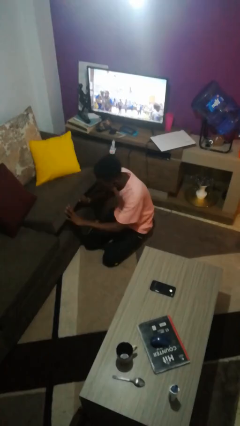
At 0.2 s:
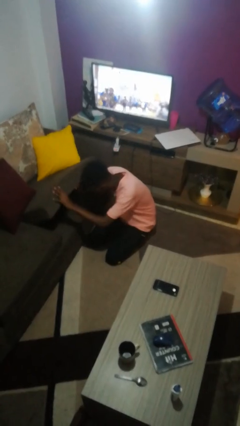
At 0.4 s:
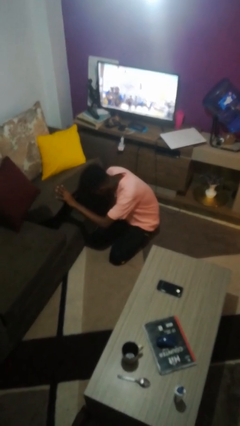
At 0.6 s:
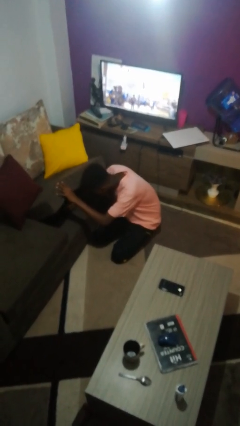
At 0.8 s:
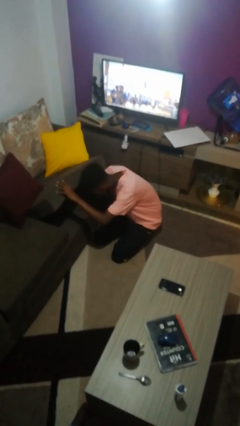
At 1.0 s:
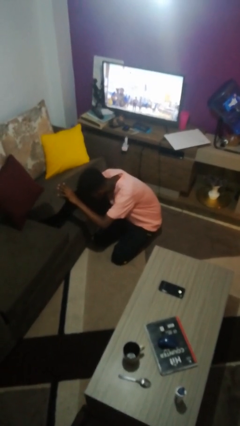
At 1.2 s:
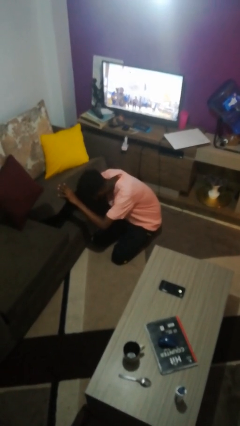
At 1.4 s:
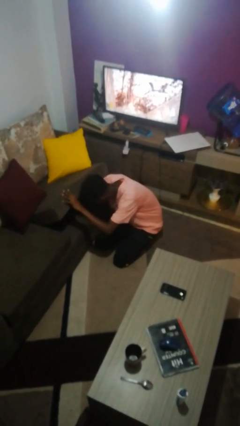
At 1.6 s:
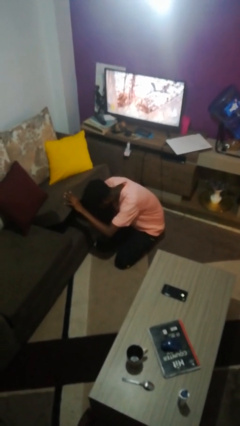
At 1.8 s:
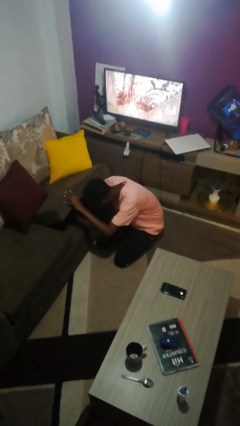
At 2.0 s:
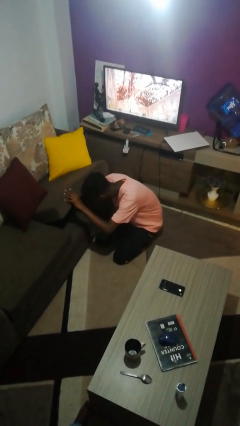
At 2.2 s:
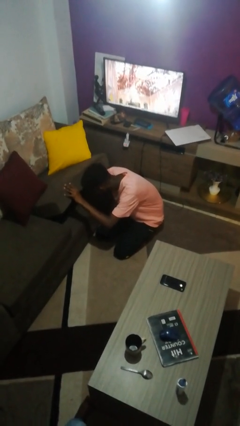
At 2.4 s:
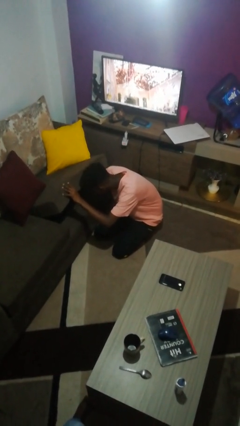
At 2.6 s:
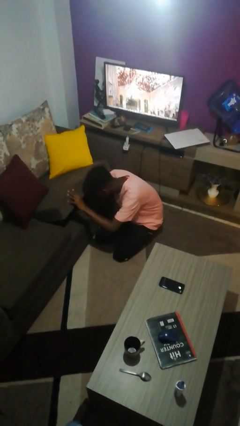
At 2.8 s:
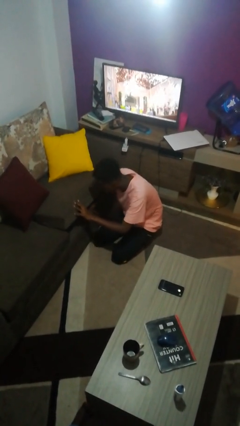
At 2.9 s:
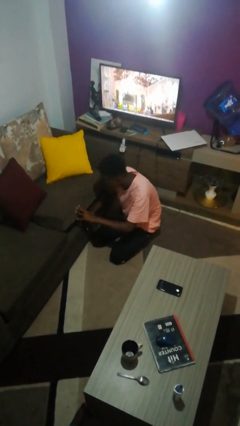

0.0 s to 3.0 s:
person searches under couch

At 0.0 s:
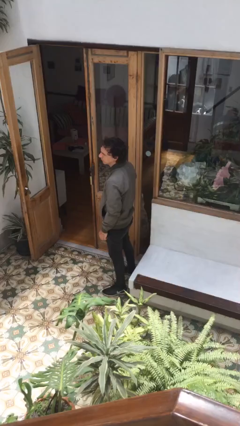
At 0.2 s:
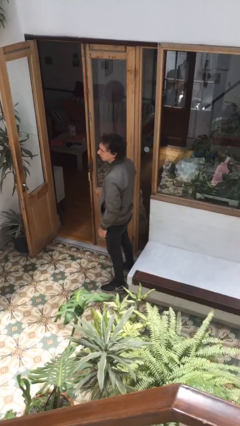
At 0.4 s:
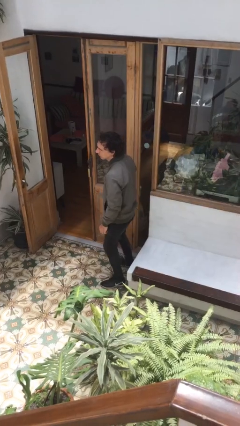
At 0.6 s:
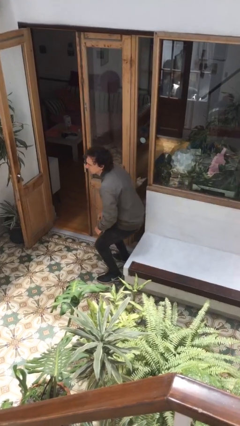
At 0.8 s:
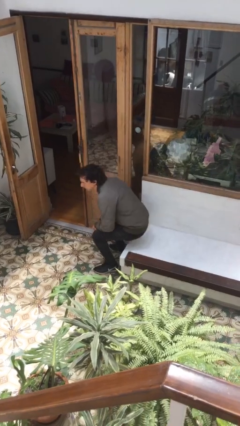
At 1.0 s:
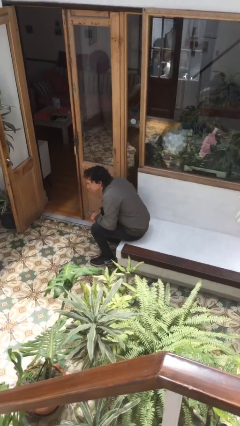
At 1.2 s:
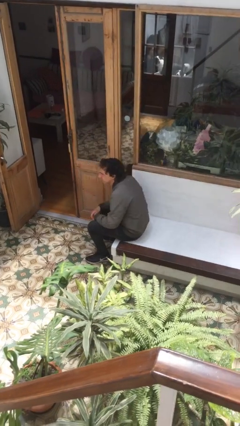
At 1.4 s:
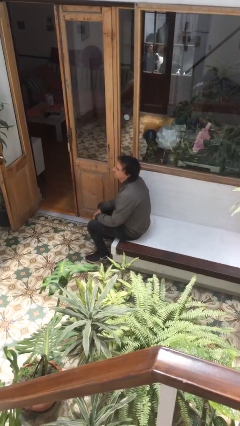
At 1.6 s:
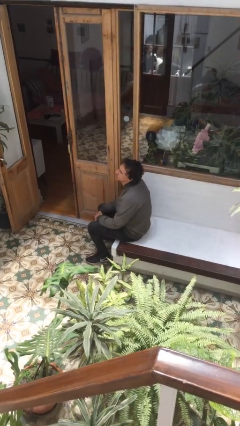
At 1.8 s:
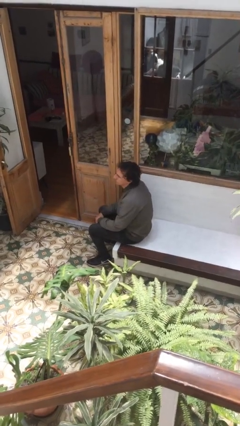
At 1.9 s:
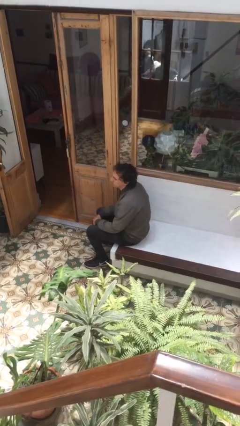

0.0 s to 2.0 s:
person sits down

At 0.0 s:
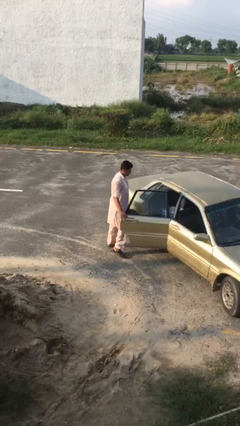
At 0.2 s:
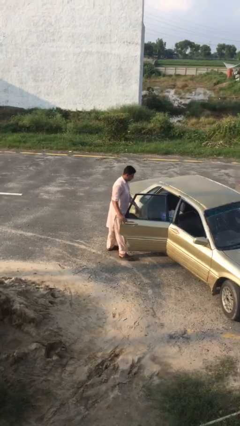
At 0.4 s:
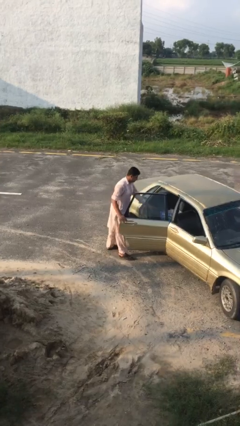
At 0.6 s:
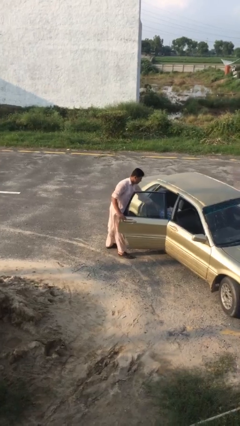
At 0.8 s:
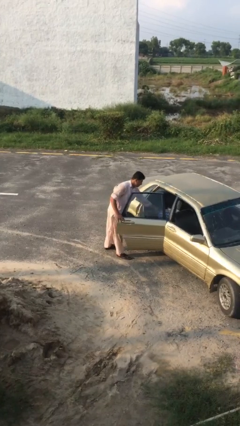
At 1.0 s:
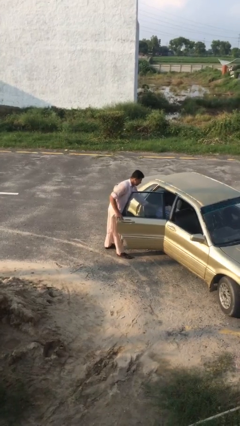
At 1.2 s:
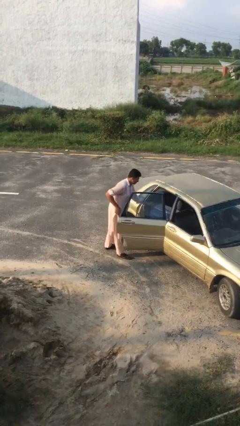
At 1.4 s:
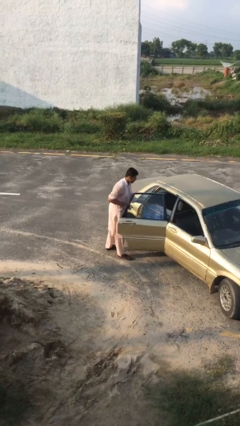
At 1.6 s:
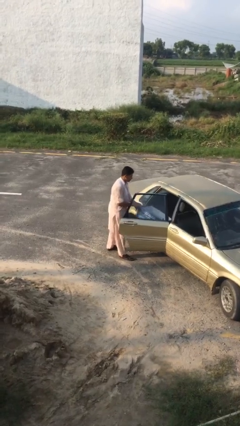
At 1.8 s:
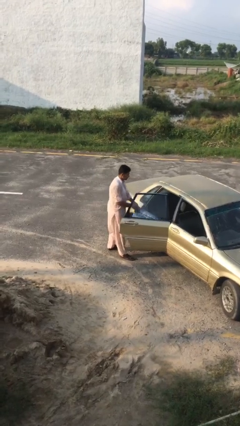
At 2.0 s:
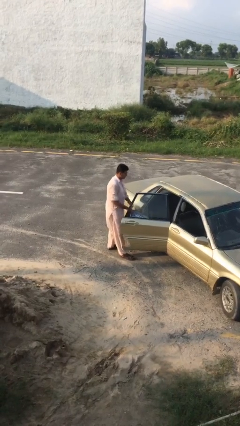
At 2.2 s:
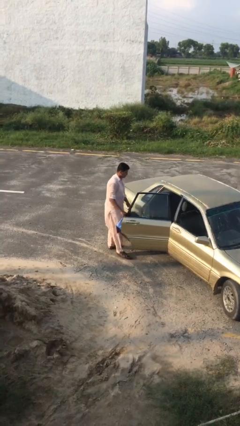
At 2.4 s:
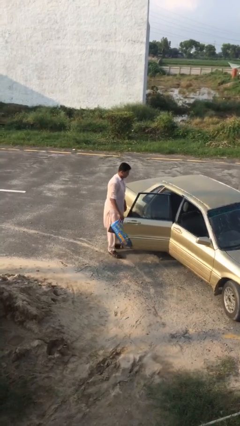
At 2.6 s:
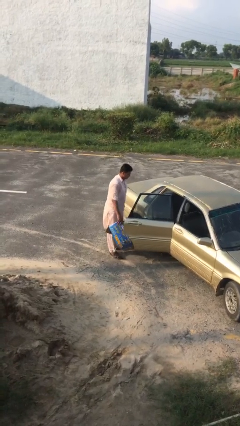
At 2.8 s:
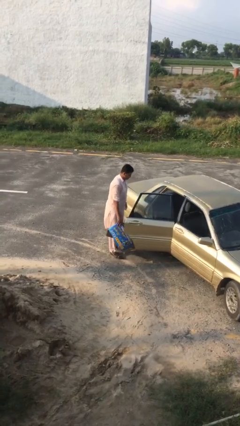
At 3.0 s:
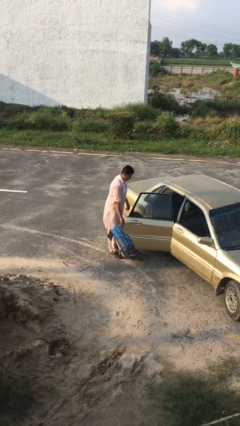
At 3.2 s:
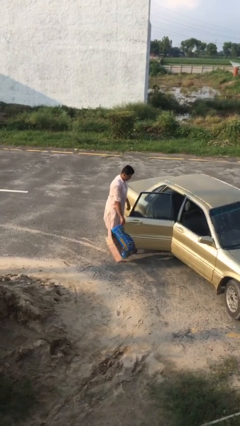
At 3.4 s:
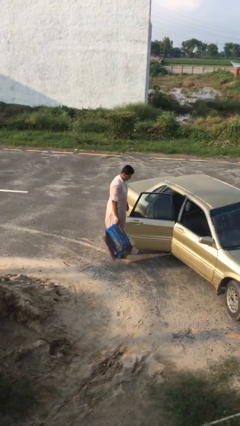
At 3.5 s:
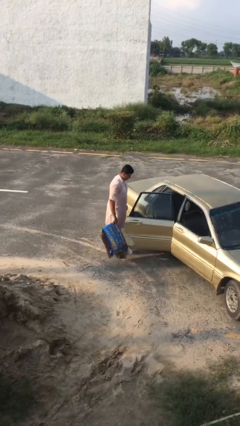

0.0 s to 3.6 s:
person unloads car

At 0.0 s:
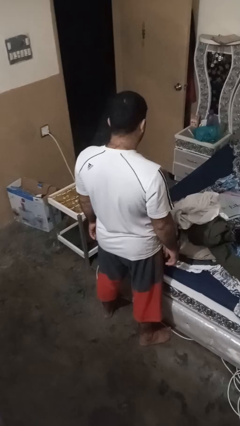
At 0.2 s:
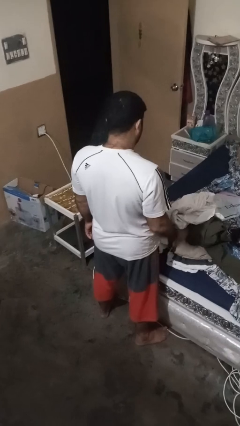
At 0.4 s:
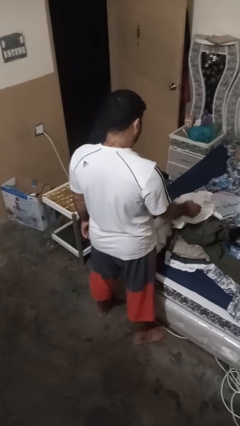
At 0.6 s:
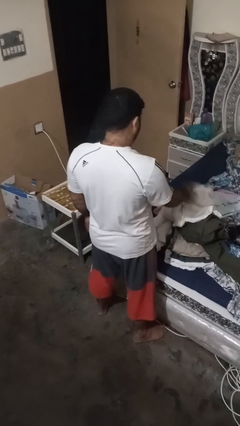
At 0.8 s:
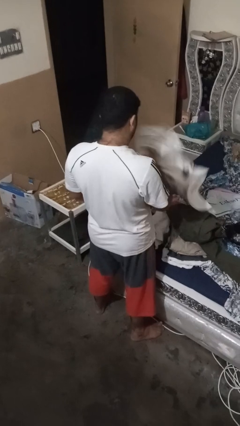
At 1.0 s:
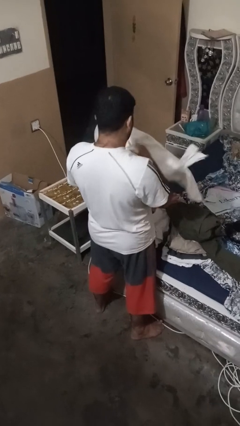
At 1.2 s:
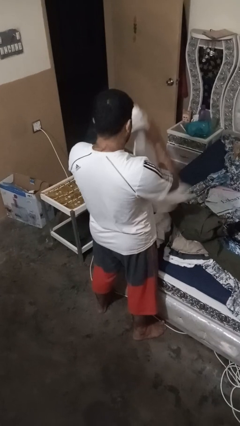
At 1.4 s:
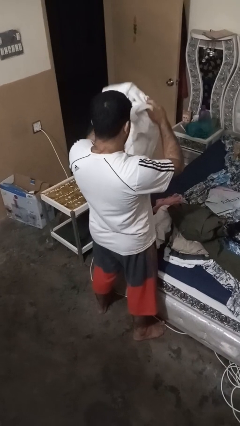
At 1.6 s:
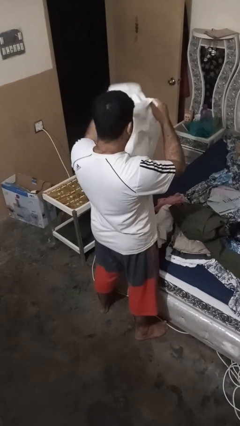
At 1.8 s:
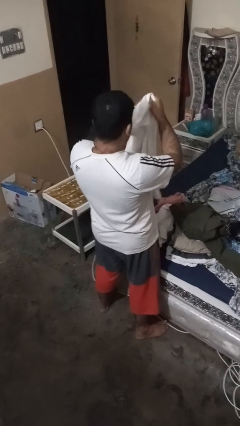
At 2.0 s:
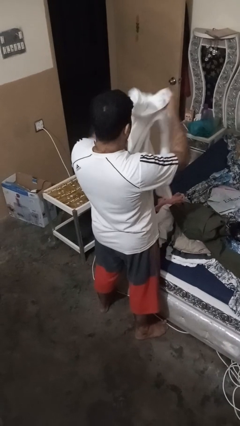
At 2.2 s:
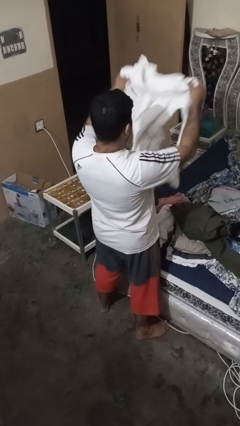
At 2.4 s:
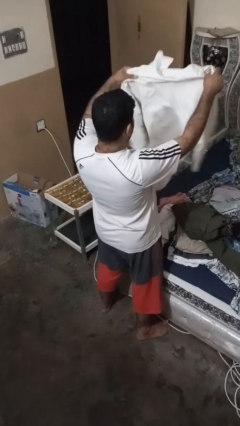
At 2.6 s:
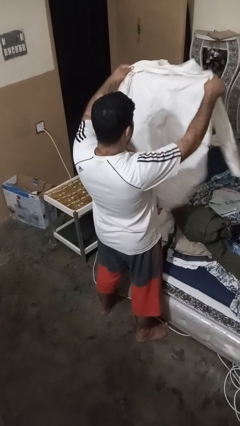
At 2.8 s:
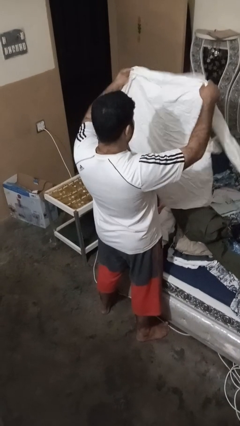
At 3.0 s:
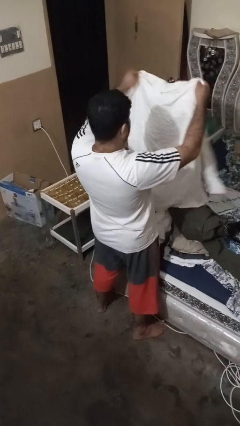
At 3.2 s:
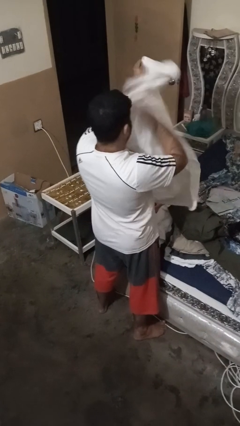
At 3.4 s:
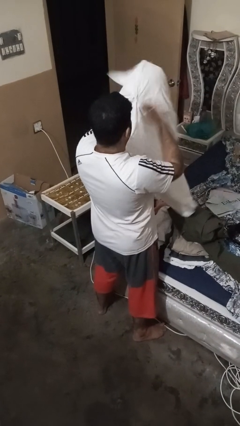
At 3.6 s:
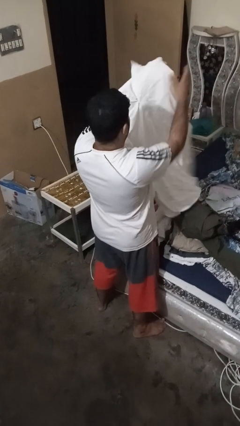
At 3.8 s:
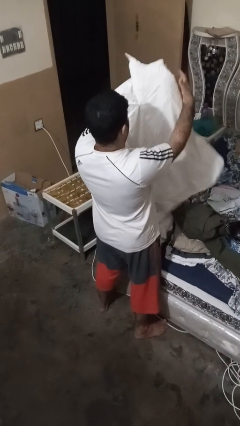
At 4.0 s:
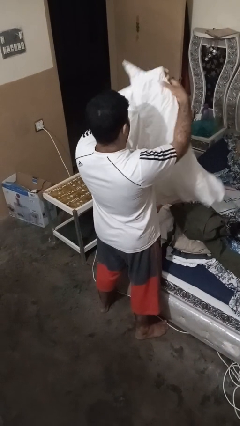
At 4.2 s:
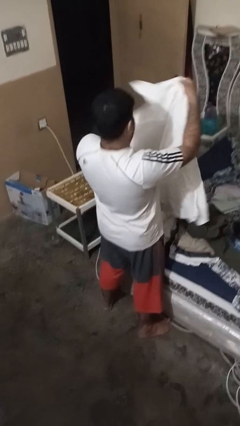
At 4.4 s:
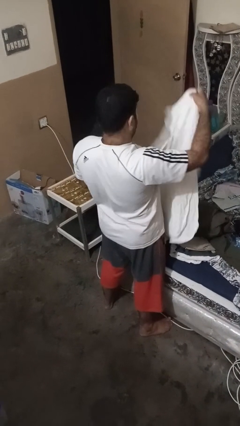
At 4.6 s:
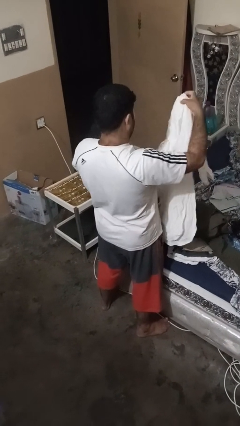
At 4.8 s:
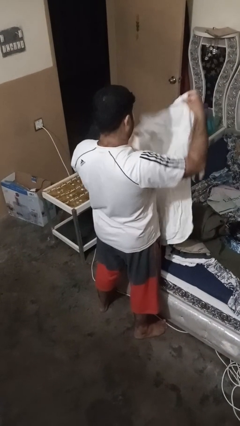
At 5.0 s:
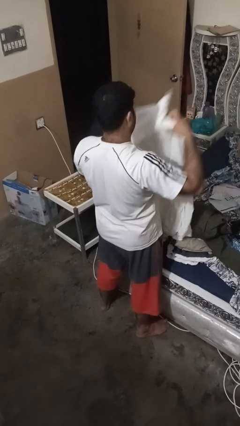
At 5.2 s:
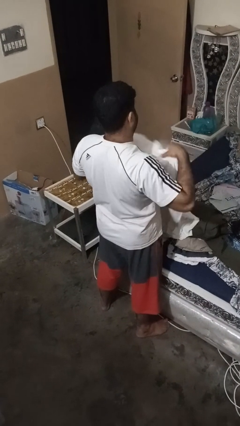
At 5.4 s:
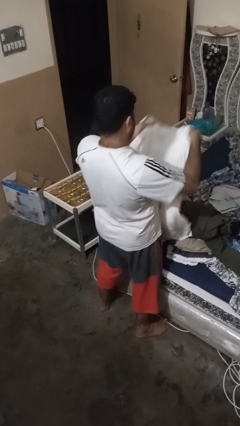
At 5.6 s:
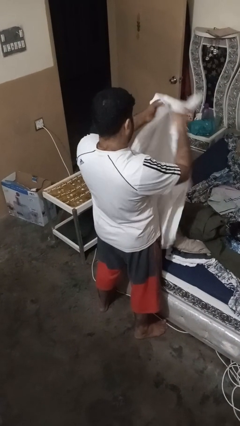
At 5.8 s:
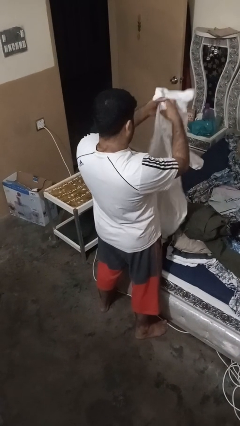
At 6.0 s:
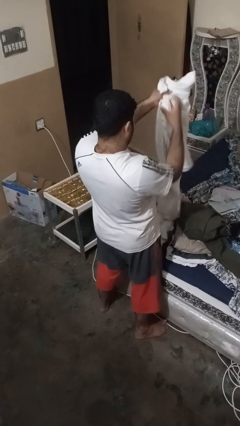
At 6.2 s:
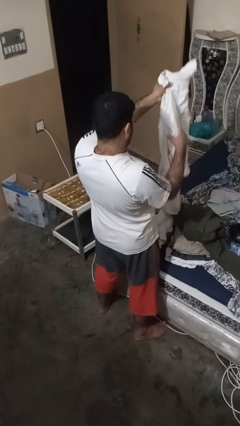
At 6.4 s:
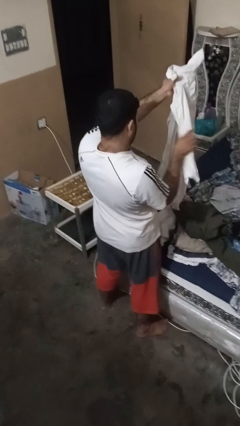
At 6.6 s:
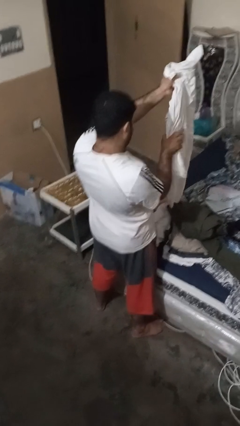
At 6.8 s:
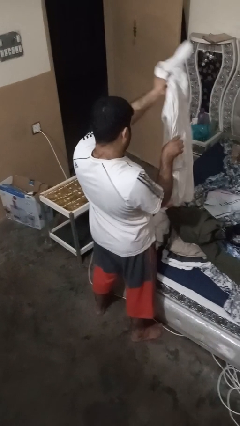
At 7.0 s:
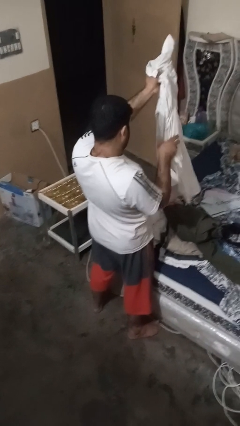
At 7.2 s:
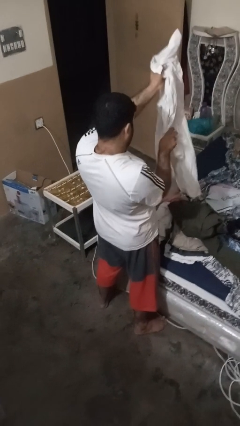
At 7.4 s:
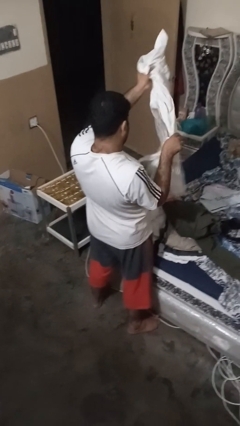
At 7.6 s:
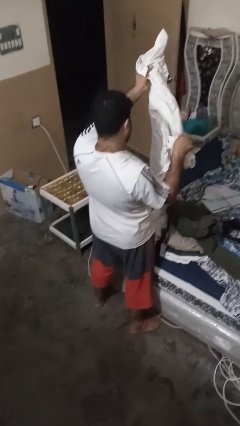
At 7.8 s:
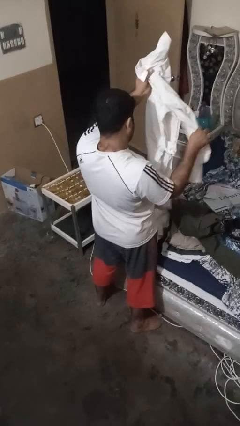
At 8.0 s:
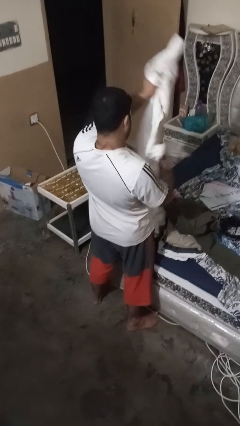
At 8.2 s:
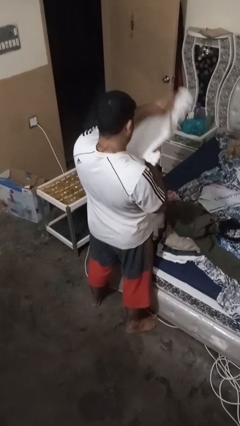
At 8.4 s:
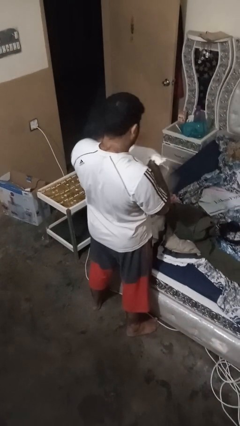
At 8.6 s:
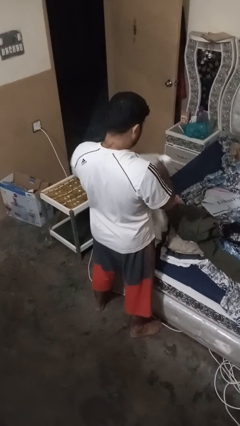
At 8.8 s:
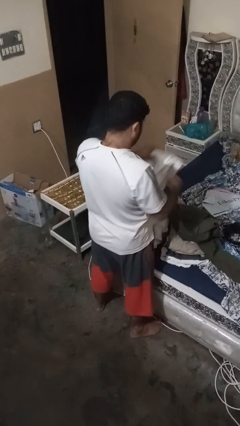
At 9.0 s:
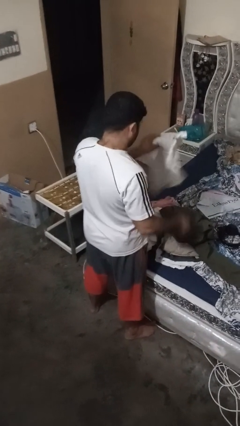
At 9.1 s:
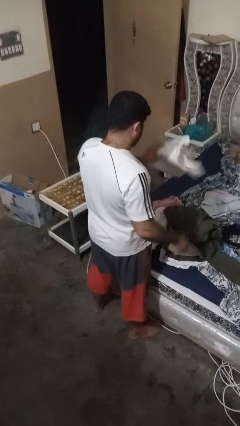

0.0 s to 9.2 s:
person folds shirt
